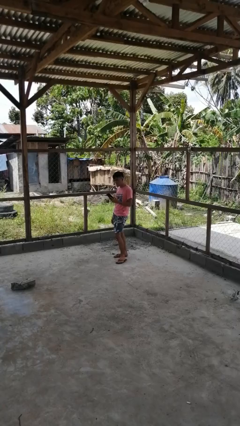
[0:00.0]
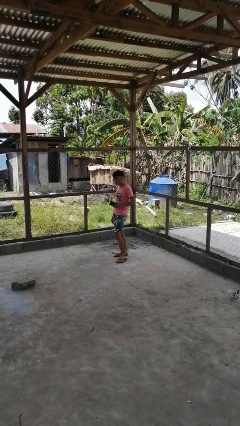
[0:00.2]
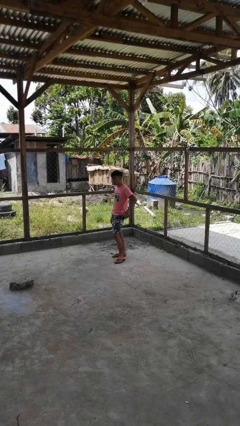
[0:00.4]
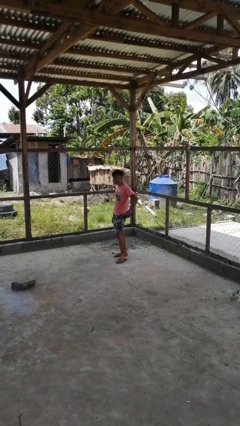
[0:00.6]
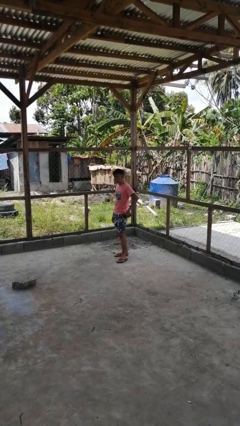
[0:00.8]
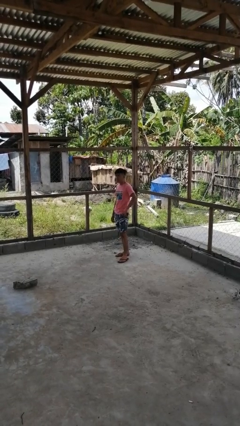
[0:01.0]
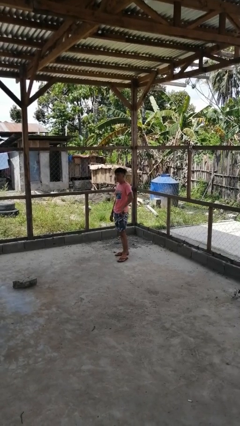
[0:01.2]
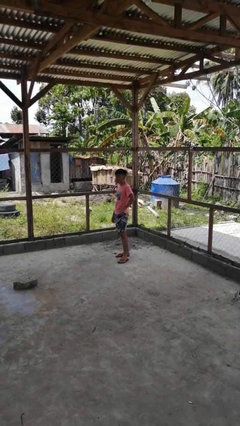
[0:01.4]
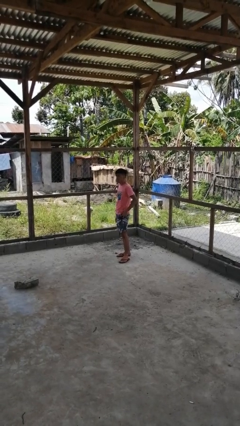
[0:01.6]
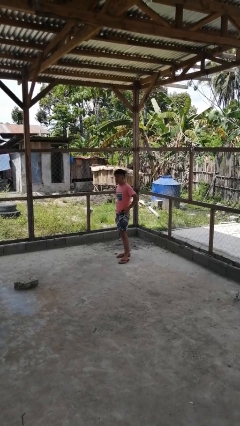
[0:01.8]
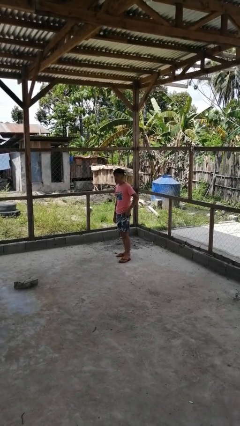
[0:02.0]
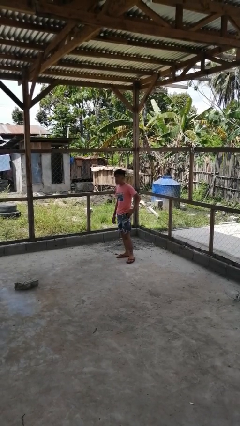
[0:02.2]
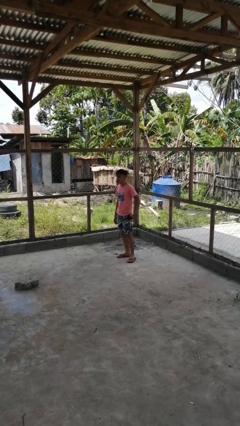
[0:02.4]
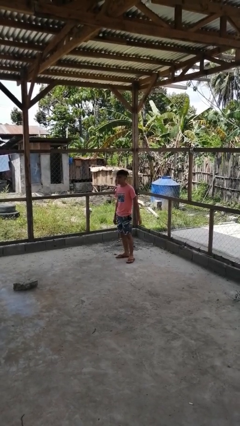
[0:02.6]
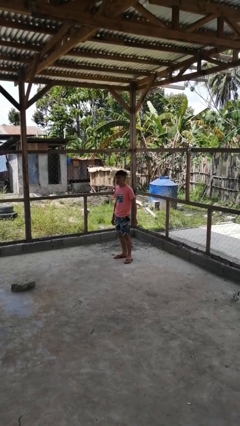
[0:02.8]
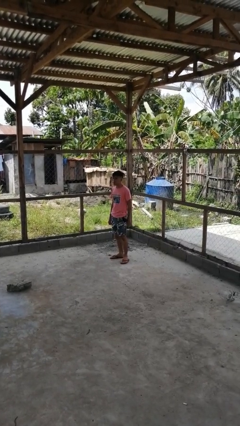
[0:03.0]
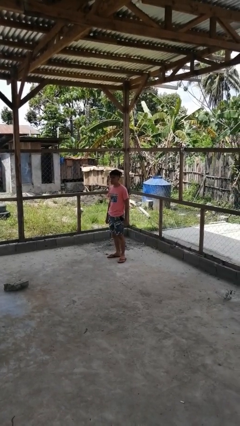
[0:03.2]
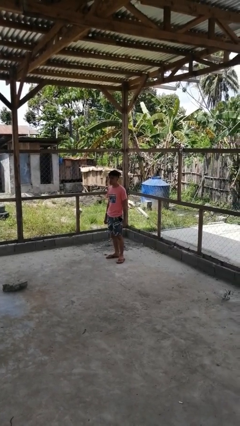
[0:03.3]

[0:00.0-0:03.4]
person puts phone into pocket

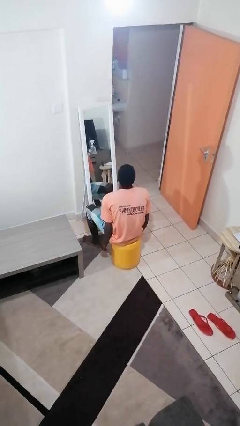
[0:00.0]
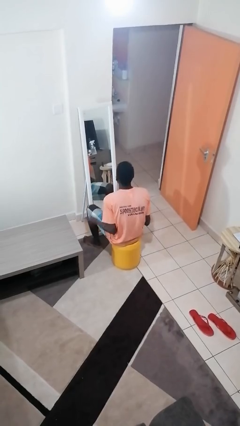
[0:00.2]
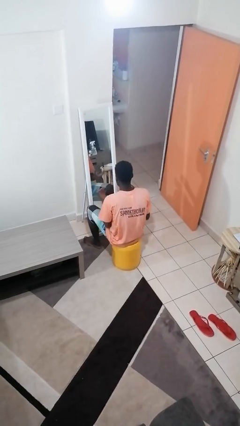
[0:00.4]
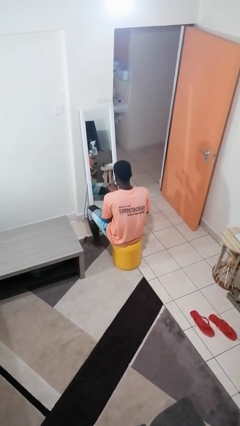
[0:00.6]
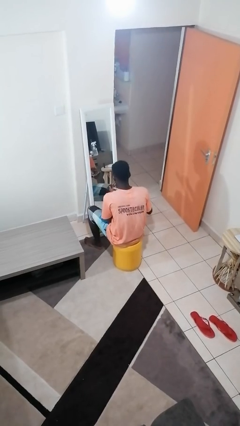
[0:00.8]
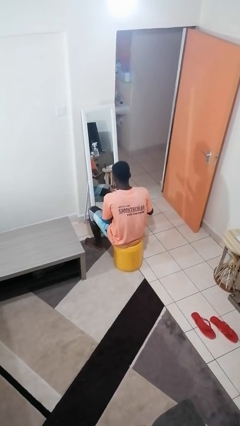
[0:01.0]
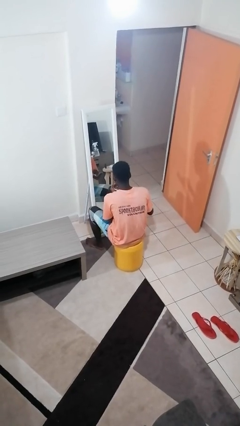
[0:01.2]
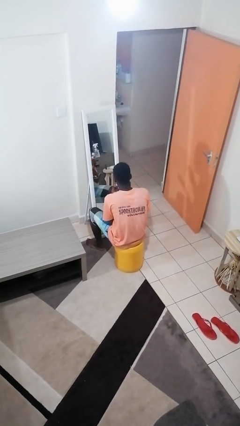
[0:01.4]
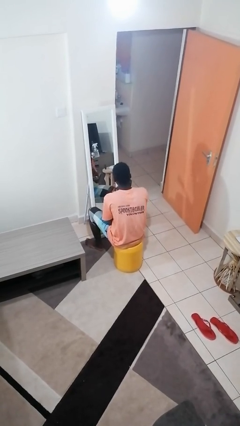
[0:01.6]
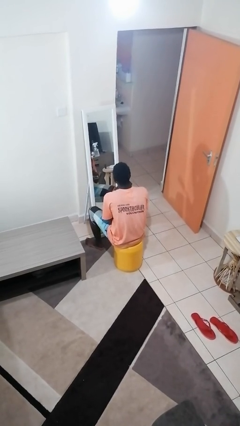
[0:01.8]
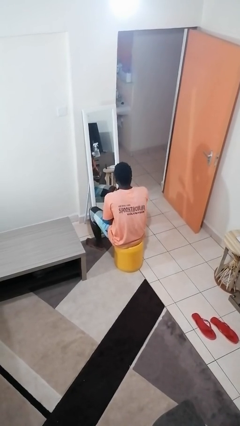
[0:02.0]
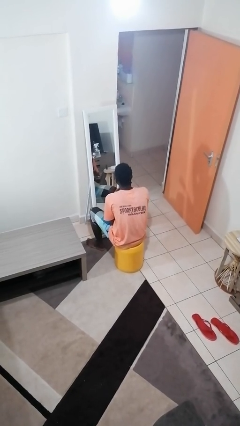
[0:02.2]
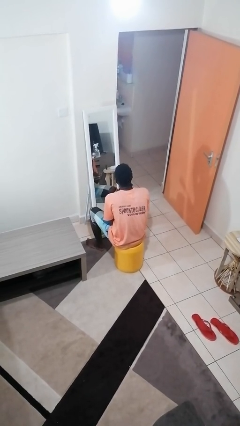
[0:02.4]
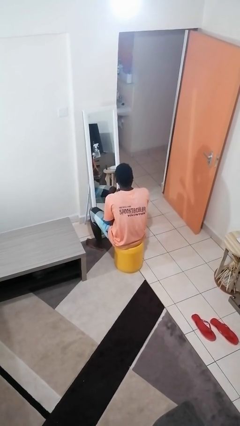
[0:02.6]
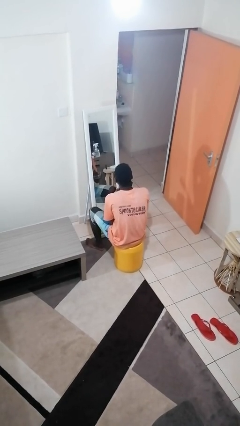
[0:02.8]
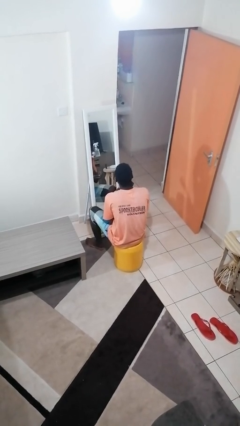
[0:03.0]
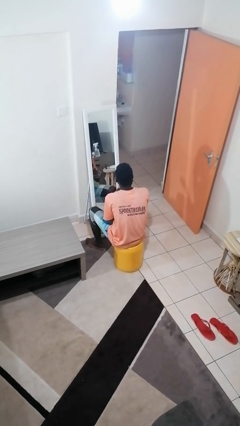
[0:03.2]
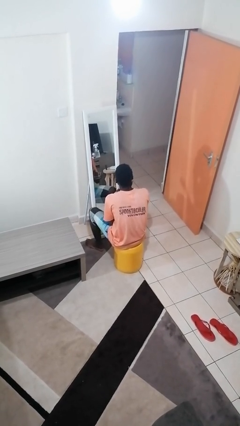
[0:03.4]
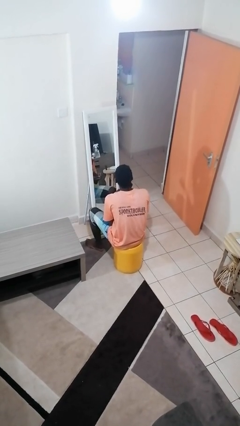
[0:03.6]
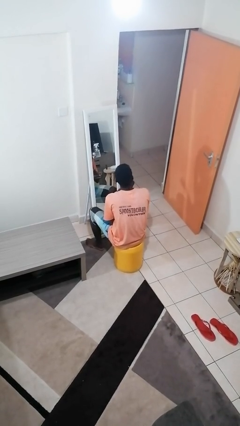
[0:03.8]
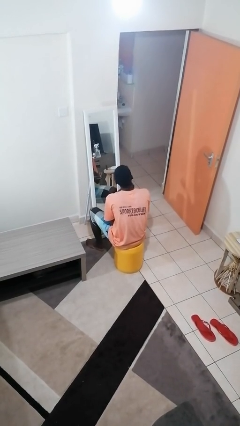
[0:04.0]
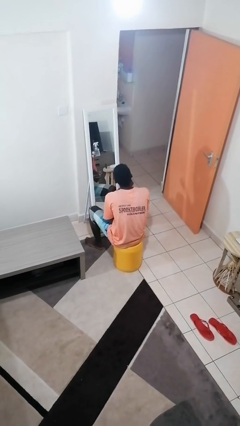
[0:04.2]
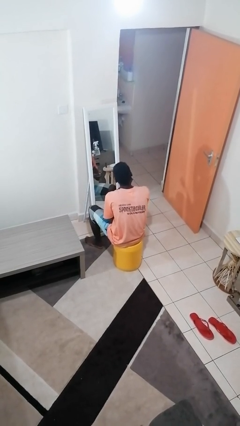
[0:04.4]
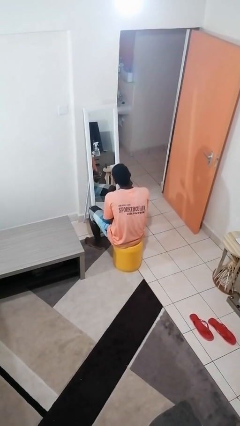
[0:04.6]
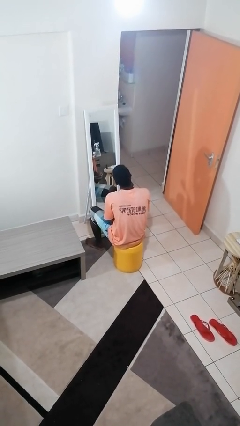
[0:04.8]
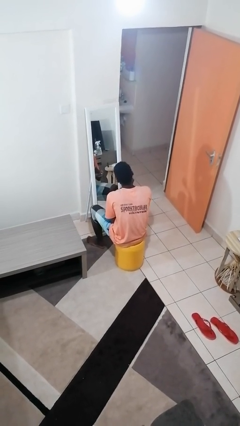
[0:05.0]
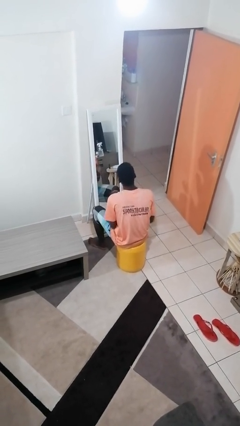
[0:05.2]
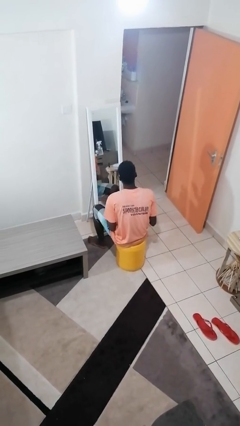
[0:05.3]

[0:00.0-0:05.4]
person applies foundation makeup

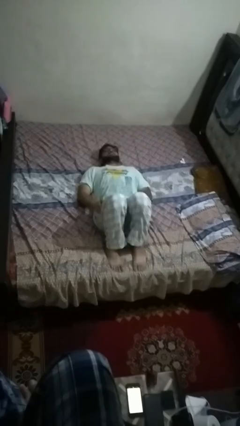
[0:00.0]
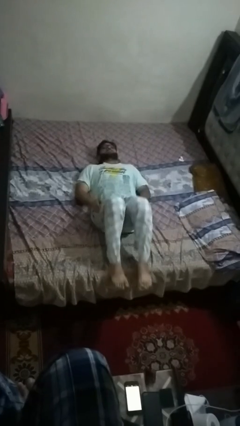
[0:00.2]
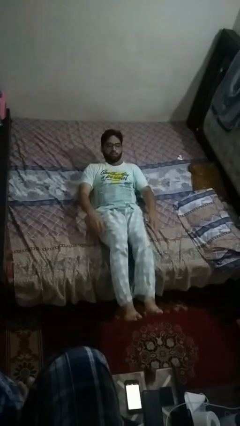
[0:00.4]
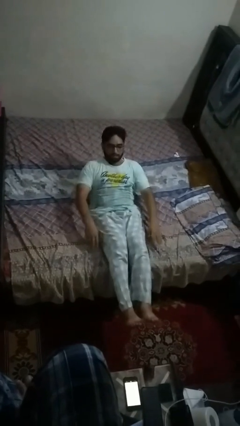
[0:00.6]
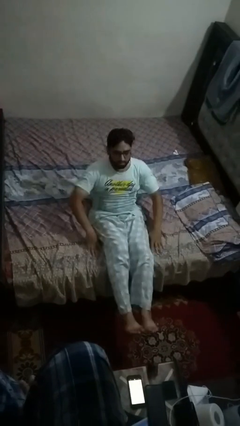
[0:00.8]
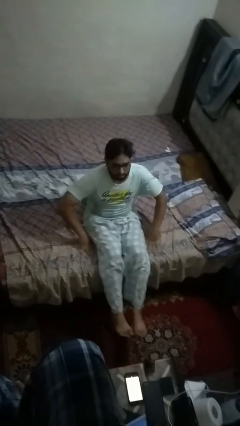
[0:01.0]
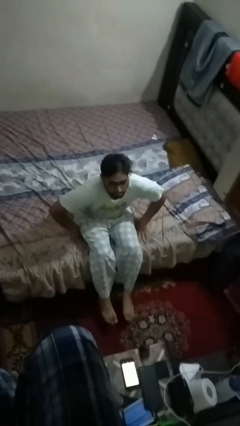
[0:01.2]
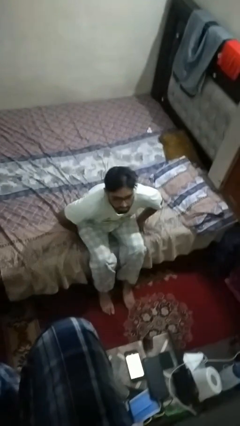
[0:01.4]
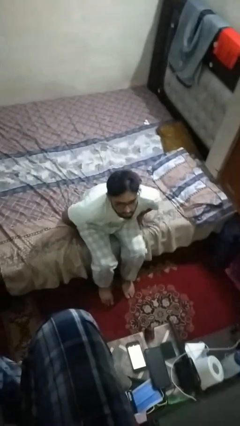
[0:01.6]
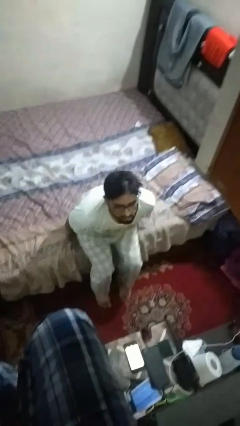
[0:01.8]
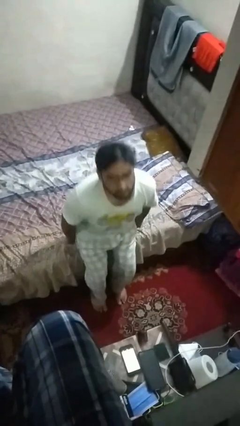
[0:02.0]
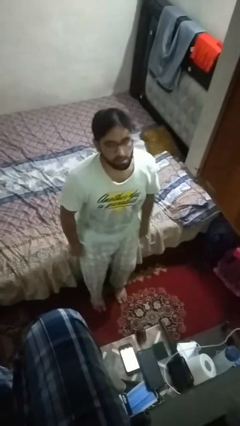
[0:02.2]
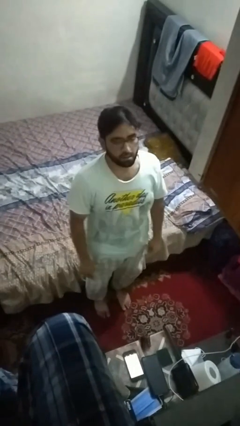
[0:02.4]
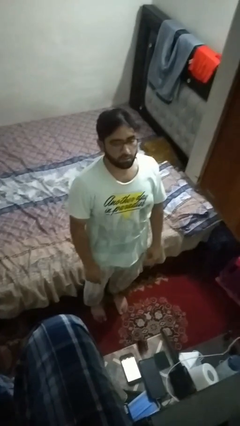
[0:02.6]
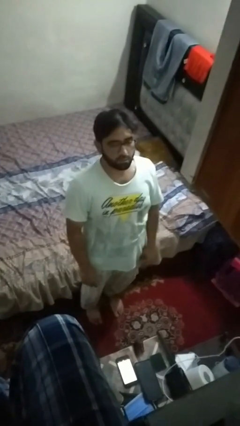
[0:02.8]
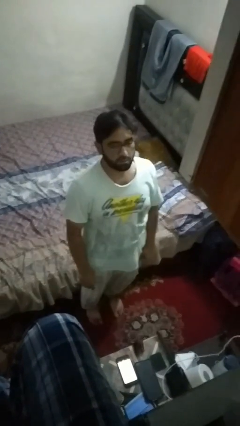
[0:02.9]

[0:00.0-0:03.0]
person stands up

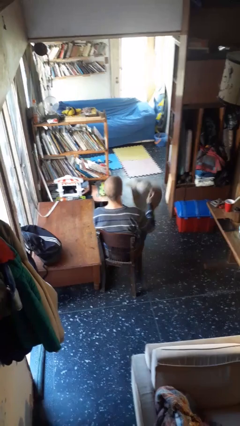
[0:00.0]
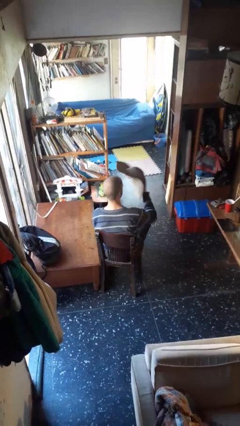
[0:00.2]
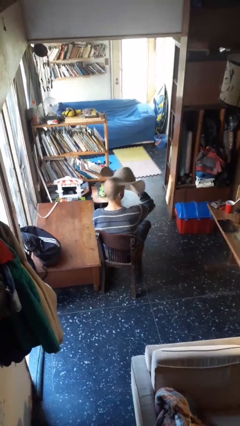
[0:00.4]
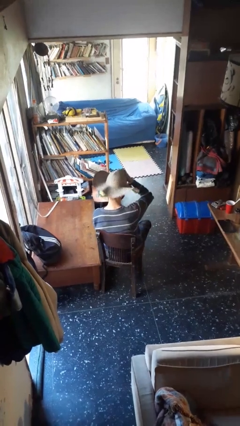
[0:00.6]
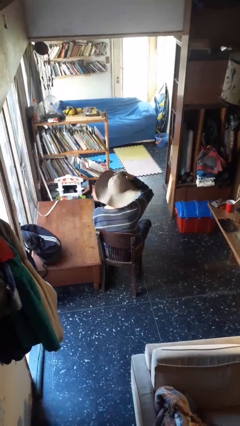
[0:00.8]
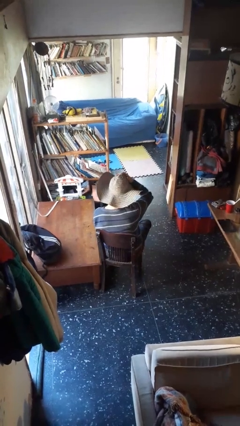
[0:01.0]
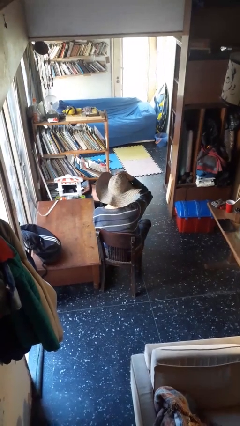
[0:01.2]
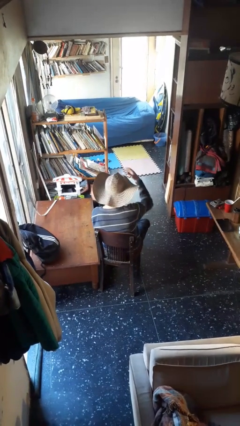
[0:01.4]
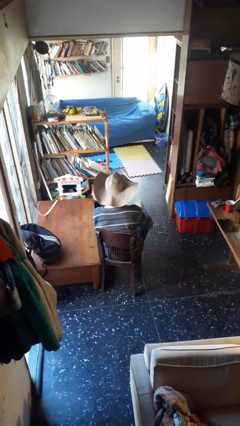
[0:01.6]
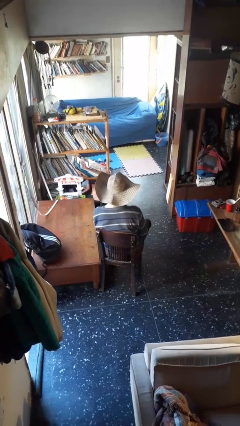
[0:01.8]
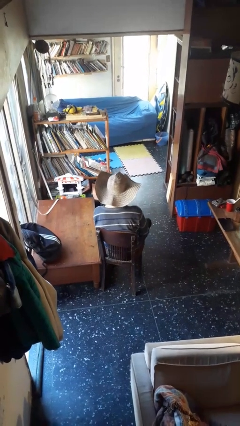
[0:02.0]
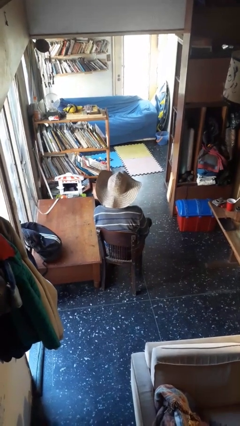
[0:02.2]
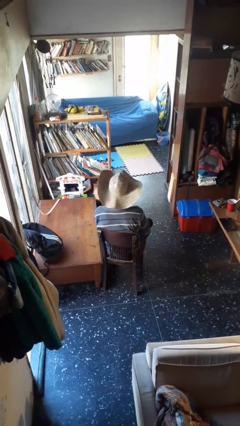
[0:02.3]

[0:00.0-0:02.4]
person puts on hat

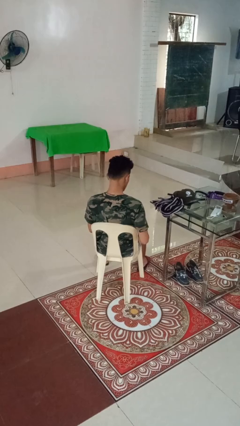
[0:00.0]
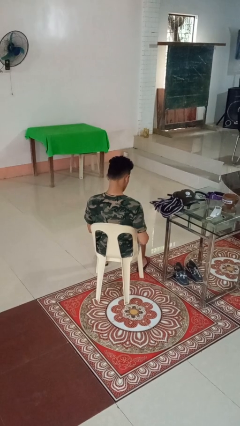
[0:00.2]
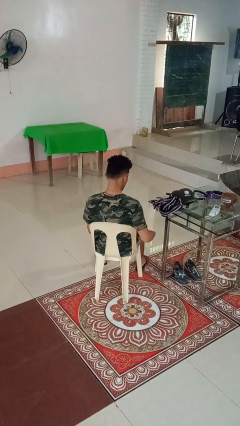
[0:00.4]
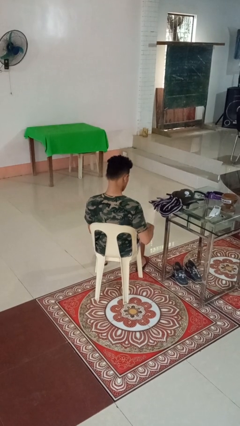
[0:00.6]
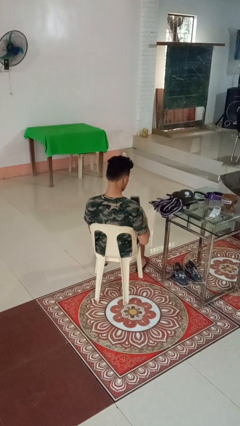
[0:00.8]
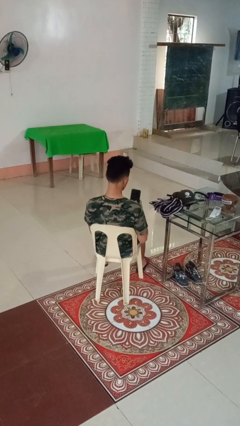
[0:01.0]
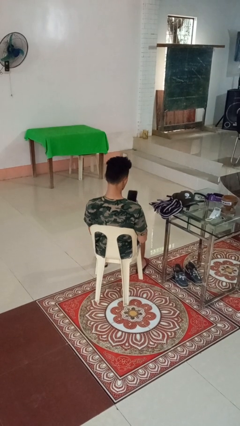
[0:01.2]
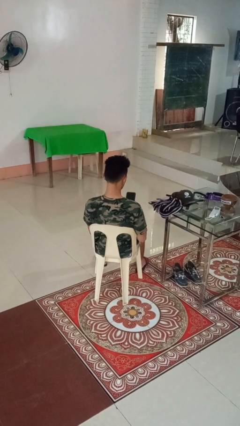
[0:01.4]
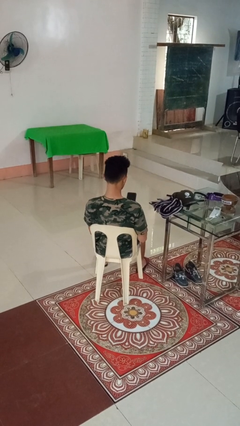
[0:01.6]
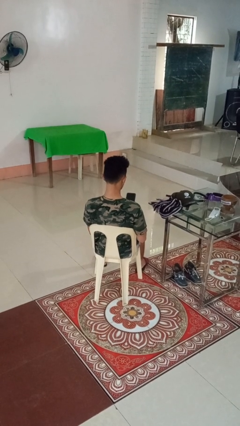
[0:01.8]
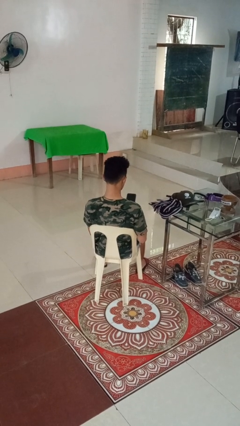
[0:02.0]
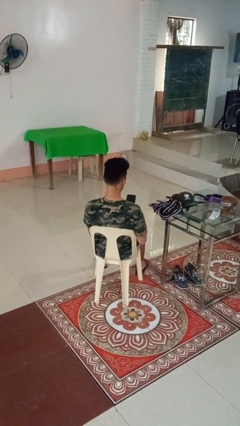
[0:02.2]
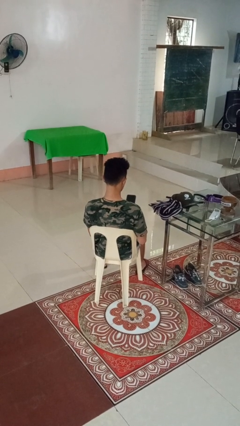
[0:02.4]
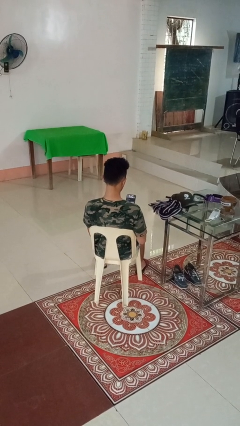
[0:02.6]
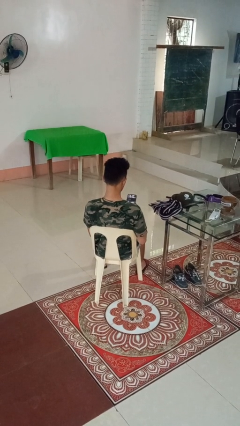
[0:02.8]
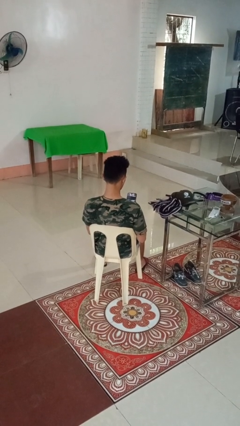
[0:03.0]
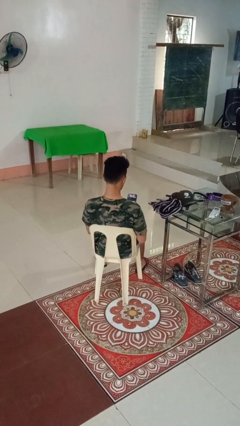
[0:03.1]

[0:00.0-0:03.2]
person takes phone from pocket

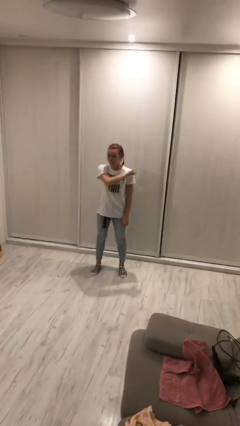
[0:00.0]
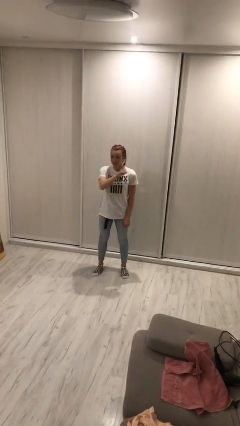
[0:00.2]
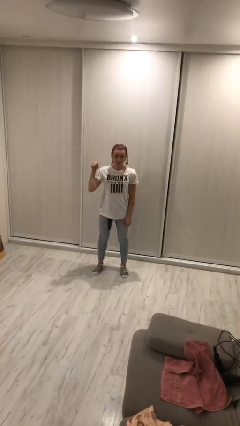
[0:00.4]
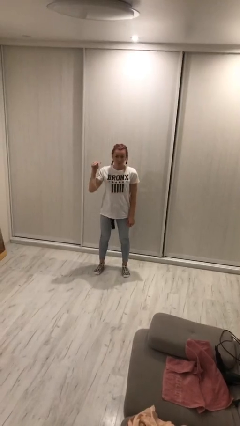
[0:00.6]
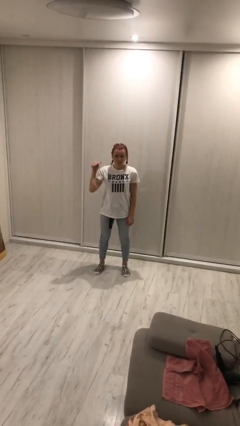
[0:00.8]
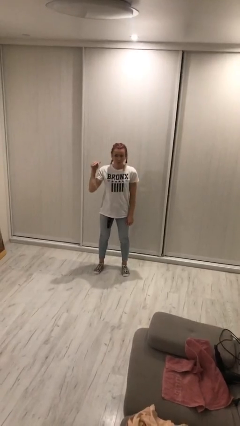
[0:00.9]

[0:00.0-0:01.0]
person gestures cut
